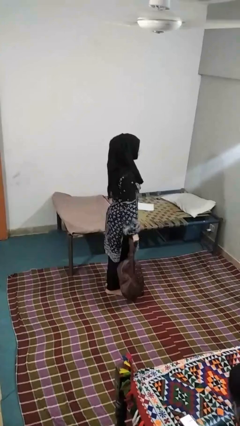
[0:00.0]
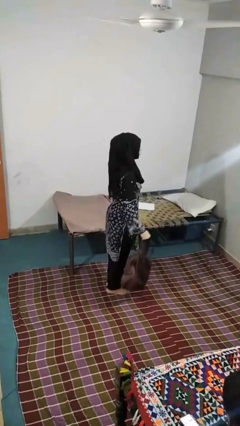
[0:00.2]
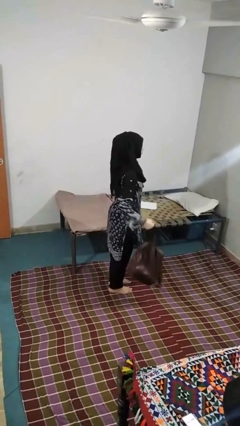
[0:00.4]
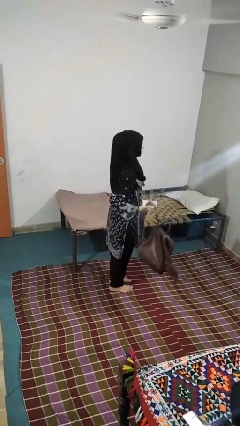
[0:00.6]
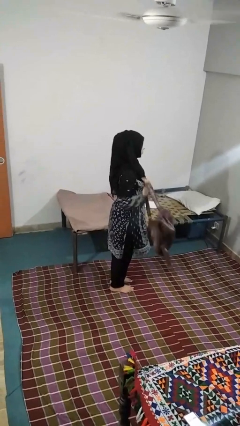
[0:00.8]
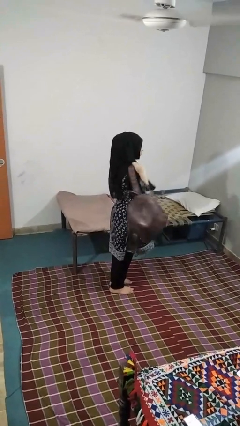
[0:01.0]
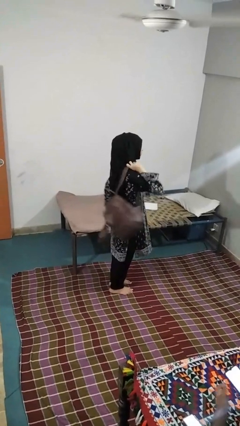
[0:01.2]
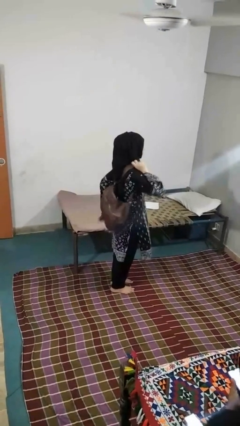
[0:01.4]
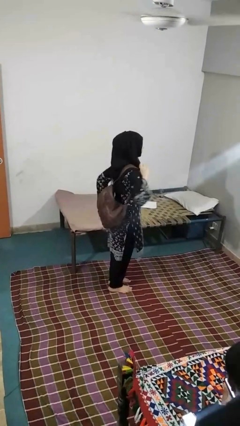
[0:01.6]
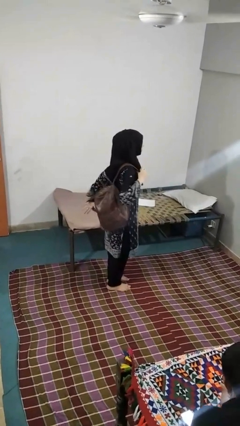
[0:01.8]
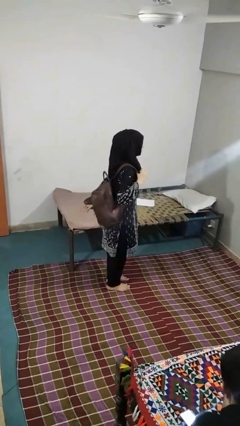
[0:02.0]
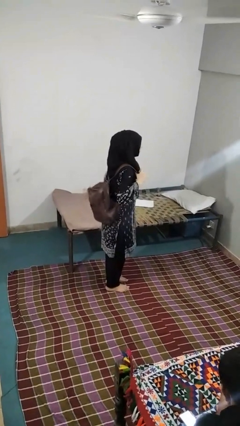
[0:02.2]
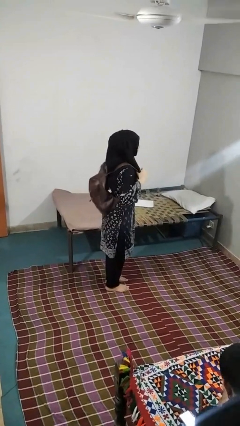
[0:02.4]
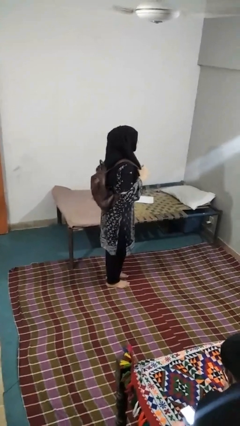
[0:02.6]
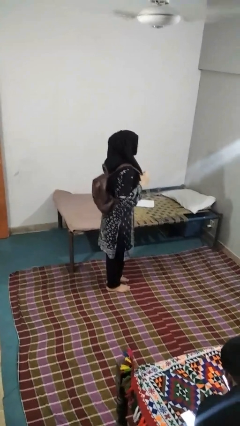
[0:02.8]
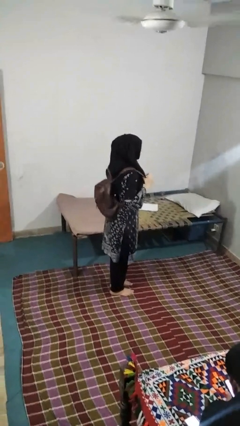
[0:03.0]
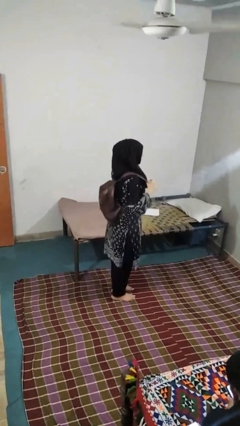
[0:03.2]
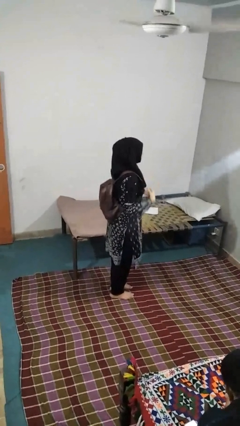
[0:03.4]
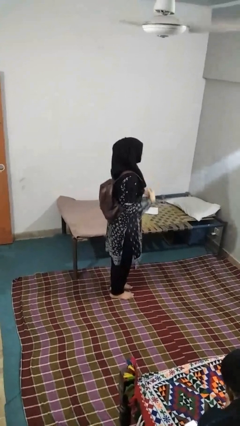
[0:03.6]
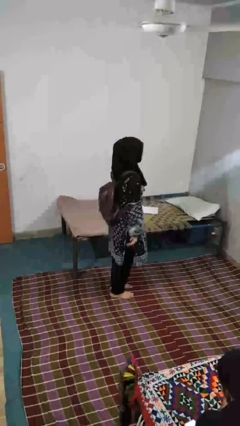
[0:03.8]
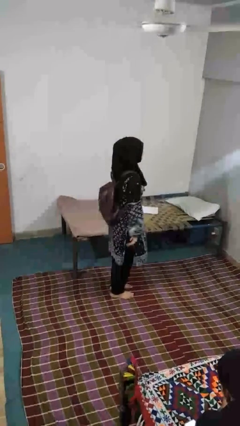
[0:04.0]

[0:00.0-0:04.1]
person puts on backpack

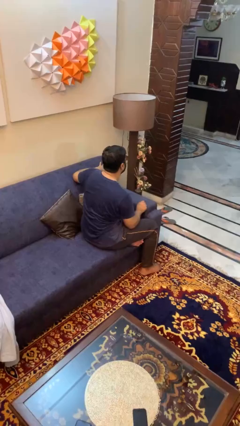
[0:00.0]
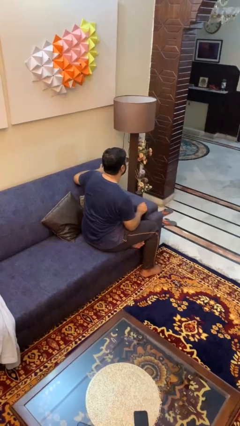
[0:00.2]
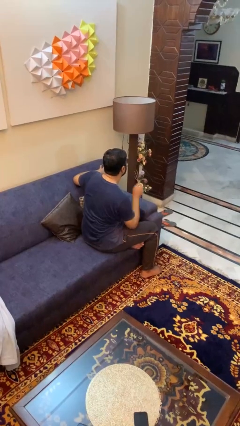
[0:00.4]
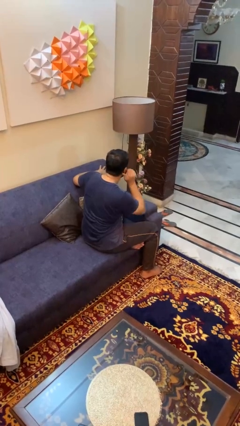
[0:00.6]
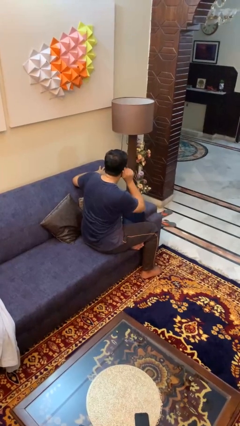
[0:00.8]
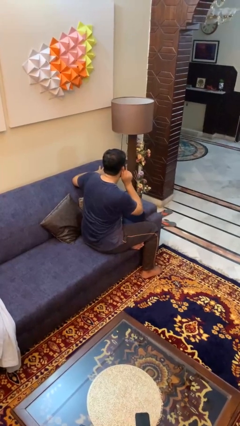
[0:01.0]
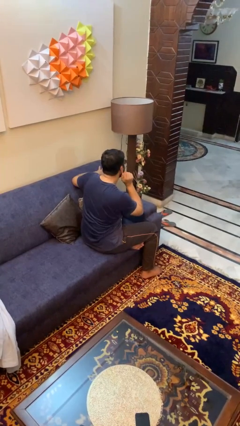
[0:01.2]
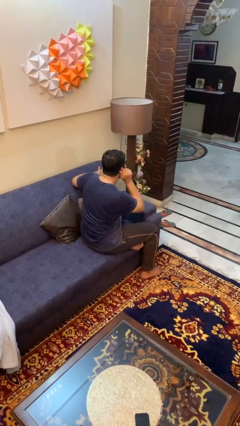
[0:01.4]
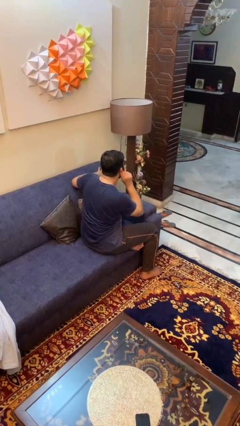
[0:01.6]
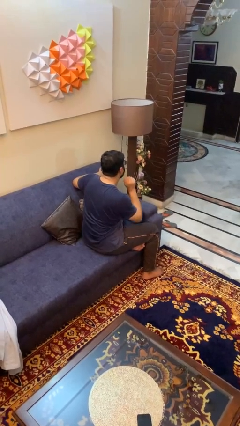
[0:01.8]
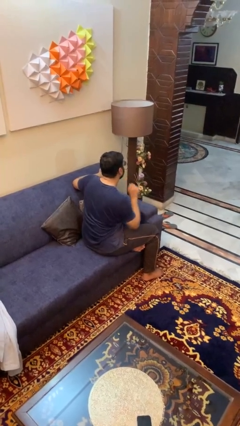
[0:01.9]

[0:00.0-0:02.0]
person touches earlobe

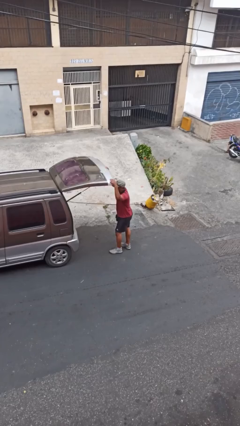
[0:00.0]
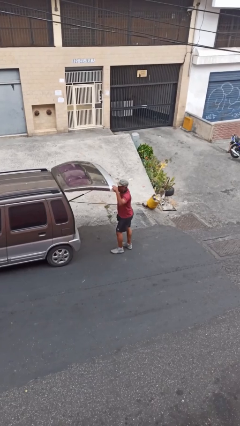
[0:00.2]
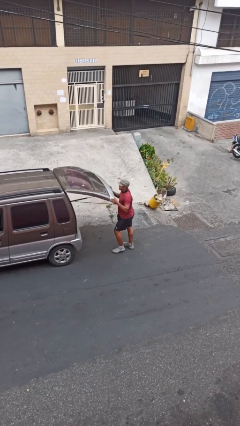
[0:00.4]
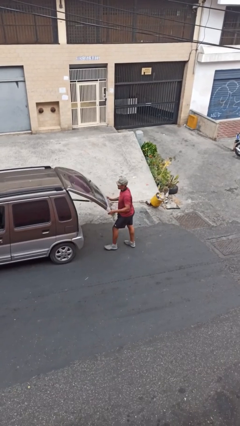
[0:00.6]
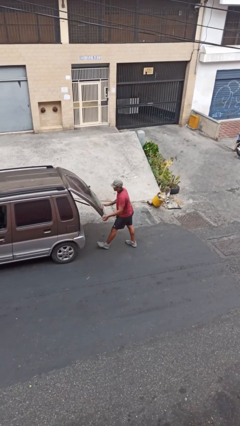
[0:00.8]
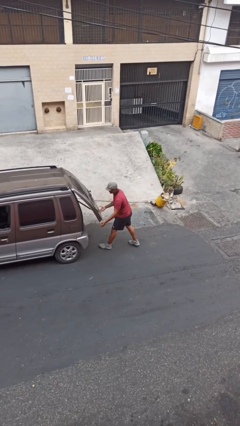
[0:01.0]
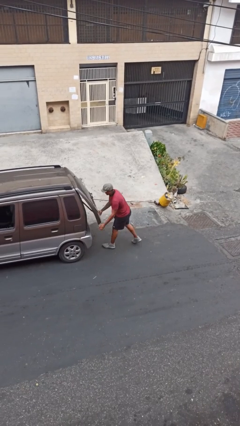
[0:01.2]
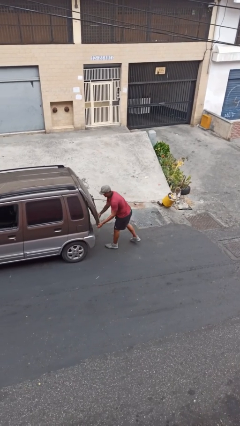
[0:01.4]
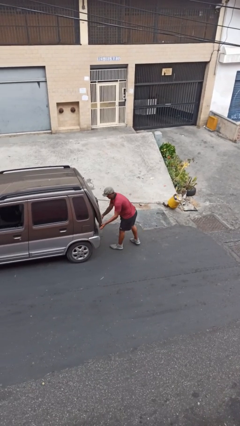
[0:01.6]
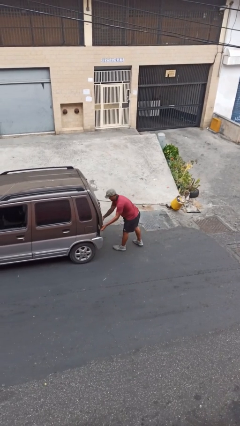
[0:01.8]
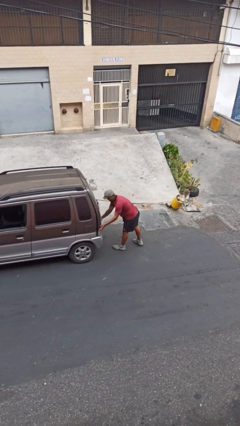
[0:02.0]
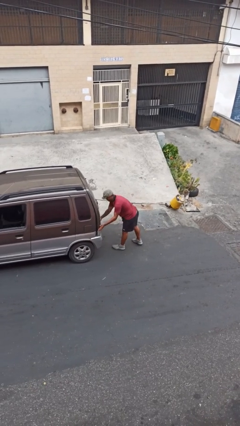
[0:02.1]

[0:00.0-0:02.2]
person closes car trunk

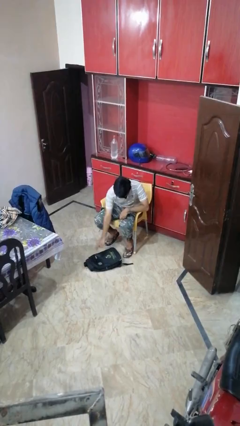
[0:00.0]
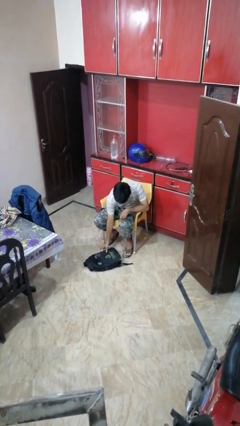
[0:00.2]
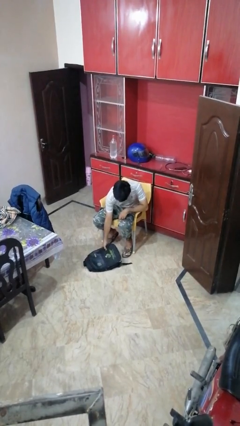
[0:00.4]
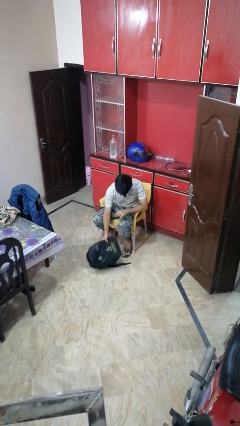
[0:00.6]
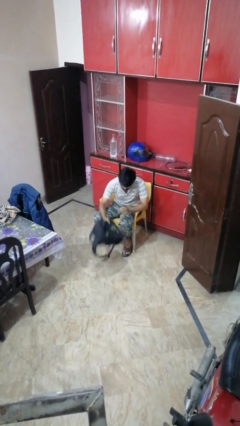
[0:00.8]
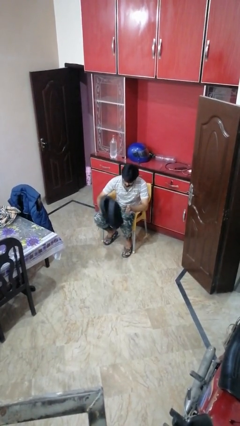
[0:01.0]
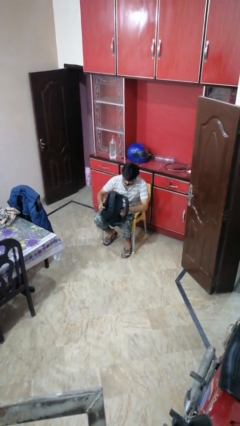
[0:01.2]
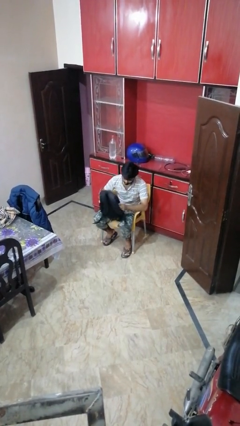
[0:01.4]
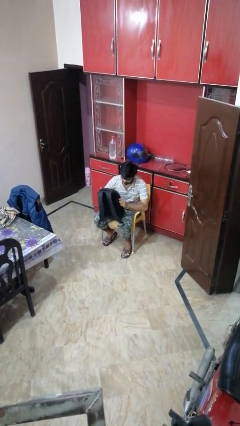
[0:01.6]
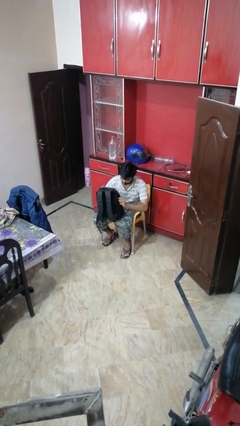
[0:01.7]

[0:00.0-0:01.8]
person picks up object from floor

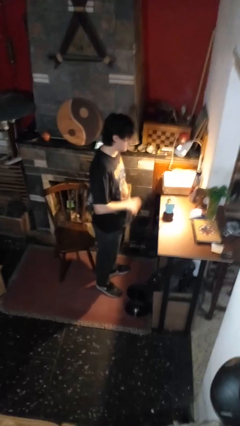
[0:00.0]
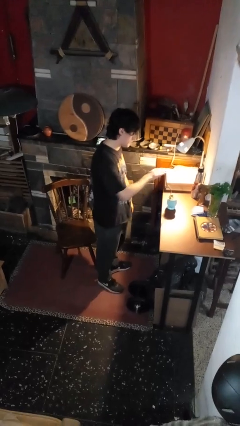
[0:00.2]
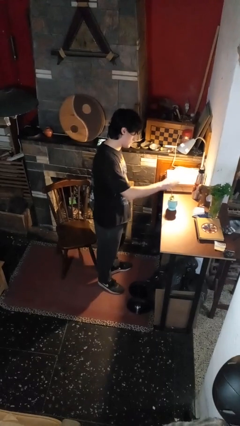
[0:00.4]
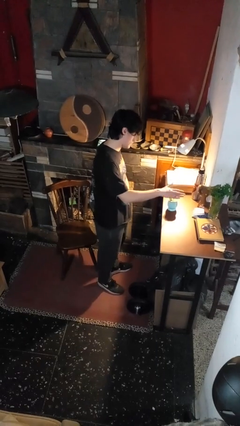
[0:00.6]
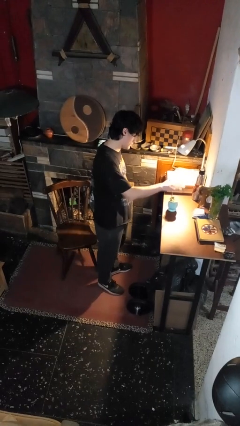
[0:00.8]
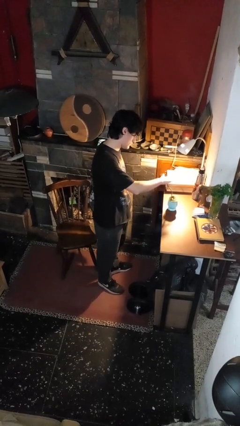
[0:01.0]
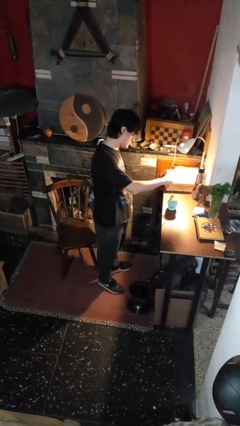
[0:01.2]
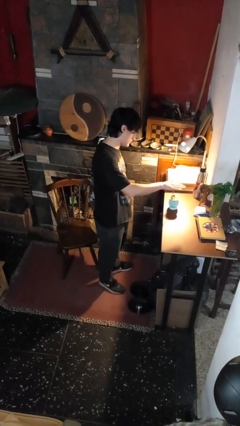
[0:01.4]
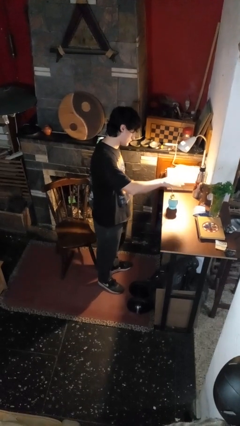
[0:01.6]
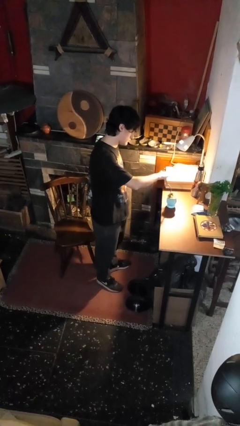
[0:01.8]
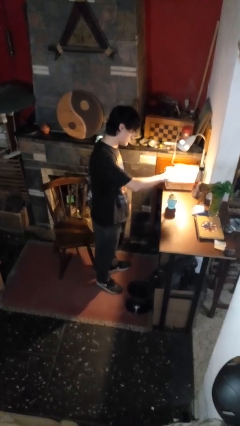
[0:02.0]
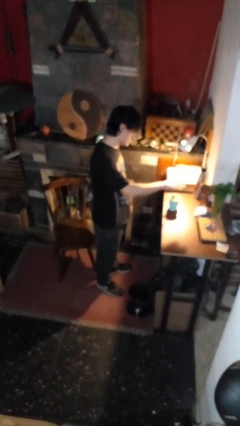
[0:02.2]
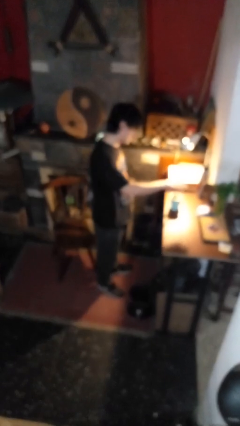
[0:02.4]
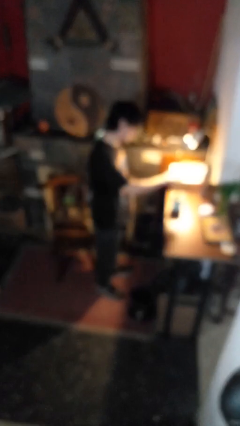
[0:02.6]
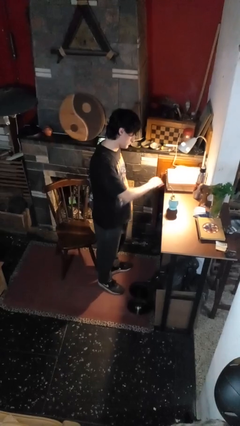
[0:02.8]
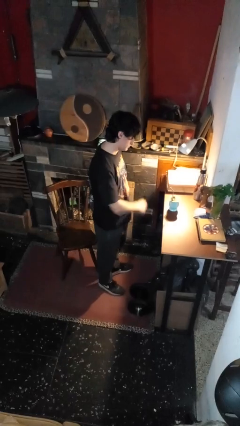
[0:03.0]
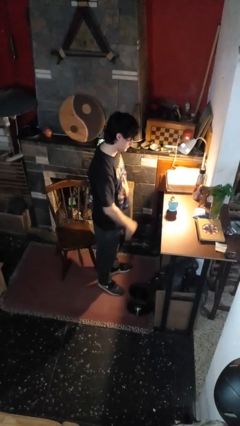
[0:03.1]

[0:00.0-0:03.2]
person waves hand over object

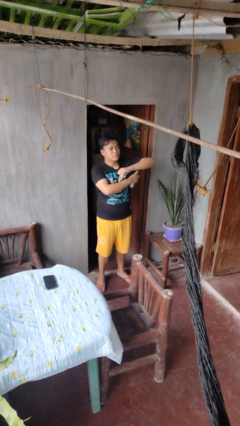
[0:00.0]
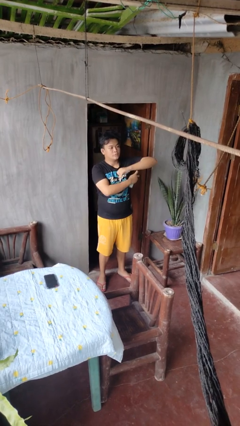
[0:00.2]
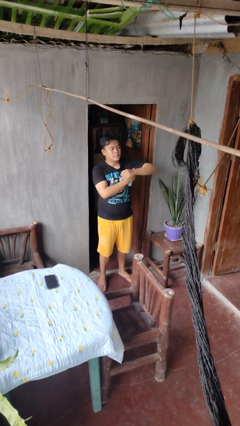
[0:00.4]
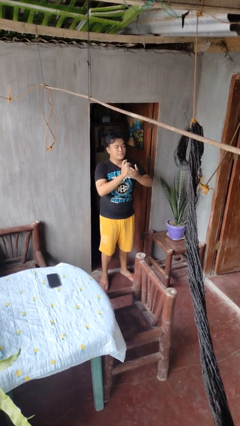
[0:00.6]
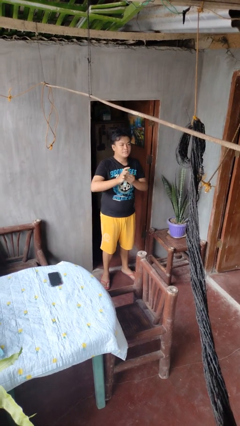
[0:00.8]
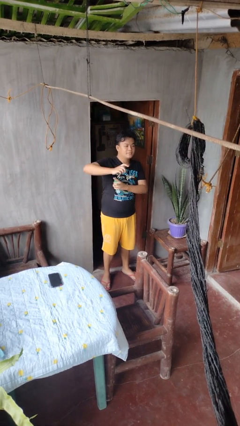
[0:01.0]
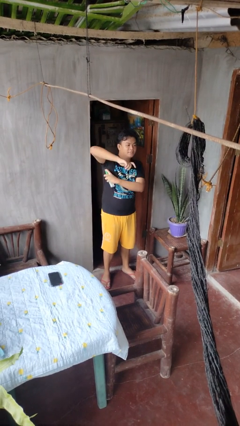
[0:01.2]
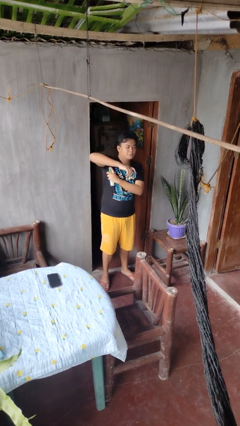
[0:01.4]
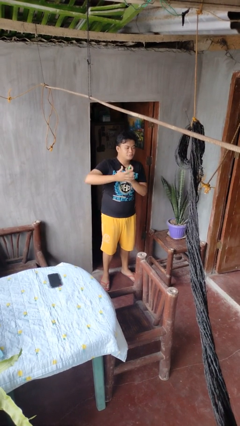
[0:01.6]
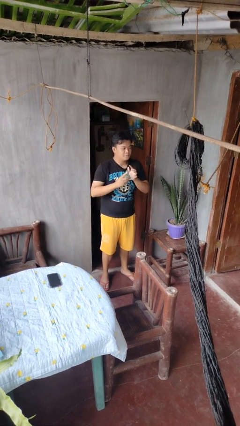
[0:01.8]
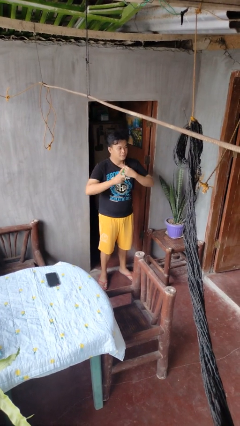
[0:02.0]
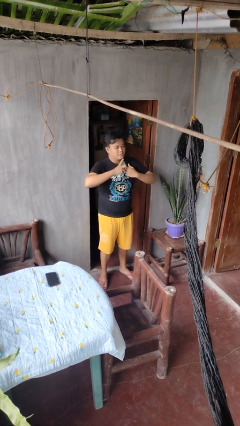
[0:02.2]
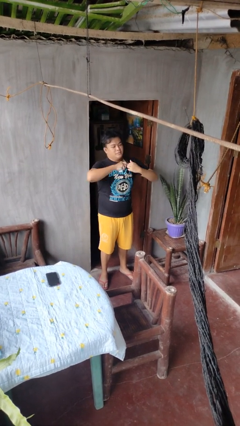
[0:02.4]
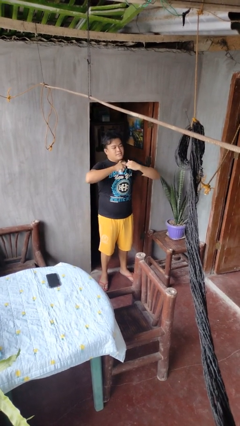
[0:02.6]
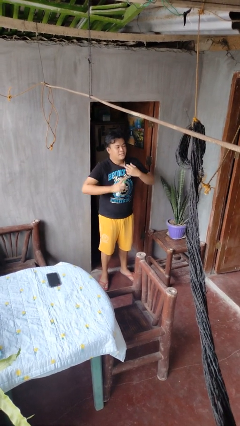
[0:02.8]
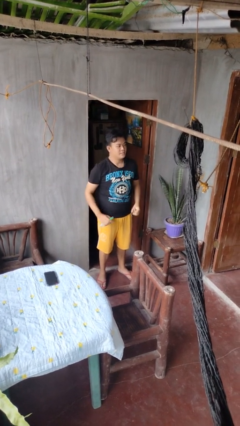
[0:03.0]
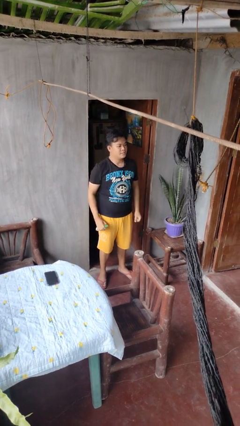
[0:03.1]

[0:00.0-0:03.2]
person applies deodorant

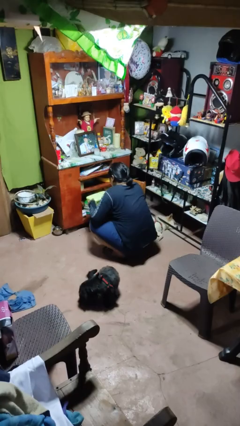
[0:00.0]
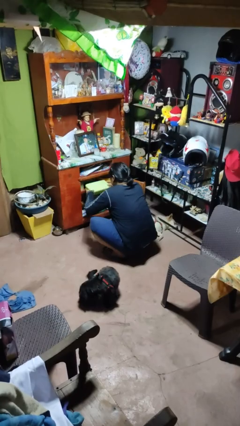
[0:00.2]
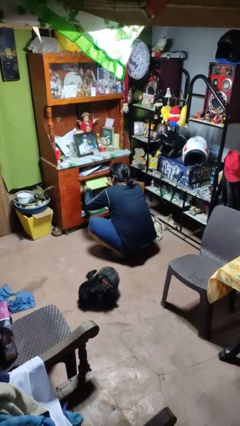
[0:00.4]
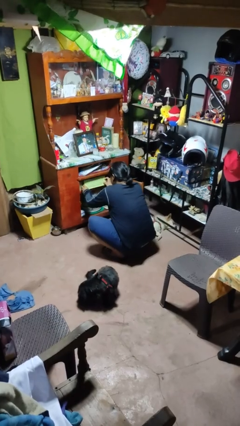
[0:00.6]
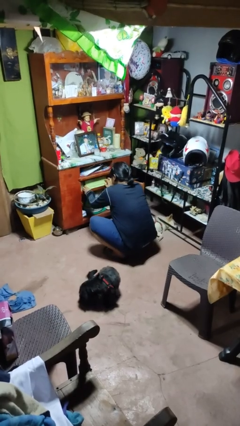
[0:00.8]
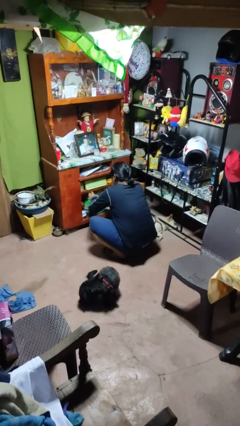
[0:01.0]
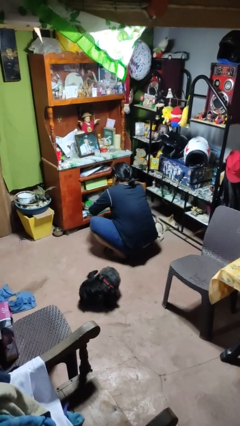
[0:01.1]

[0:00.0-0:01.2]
person puts down object into cabinet
